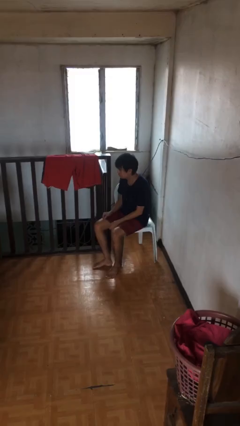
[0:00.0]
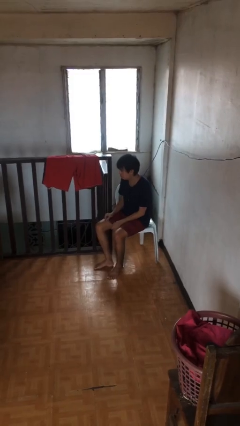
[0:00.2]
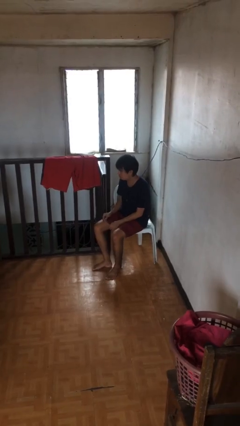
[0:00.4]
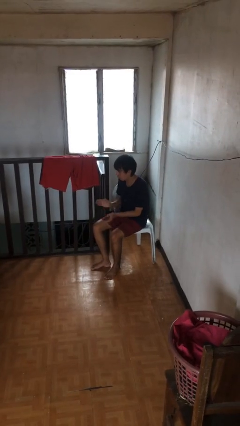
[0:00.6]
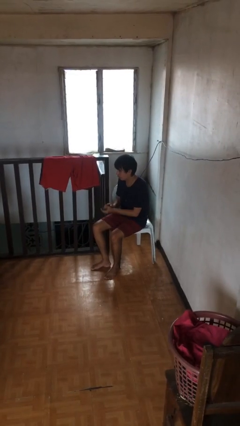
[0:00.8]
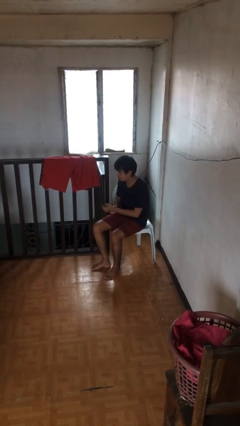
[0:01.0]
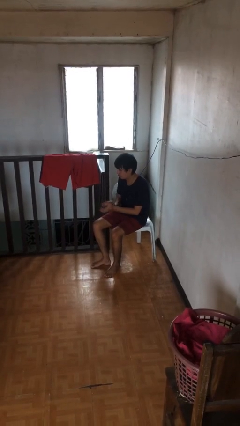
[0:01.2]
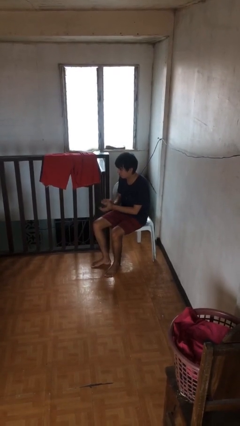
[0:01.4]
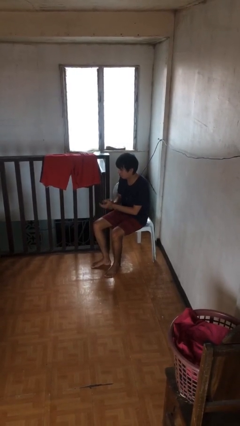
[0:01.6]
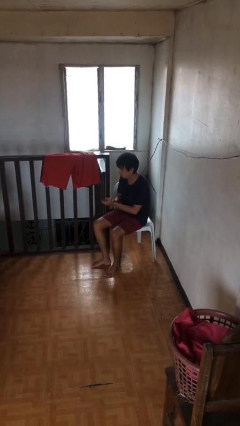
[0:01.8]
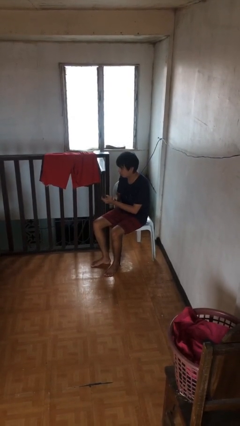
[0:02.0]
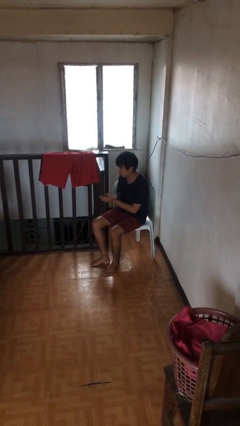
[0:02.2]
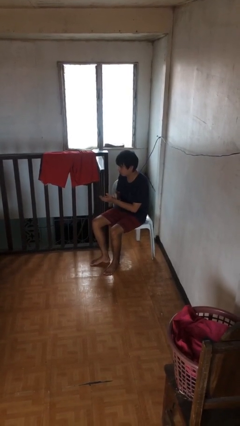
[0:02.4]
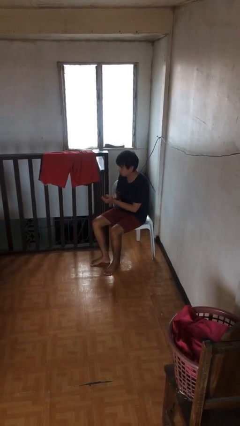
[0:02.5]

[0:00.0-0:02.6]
person claps hands

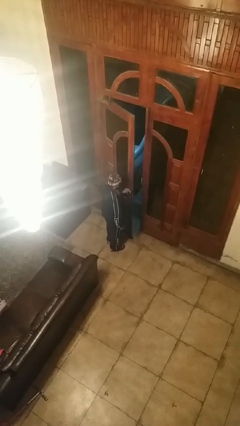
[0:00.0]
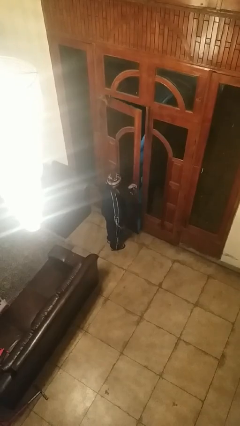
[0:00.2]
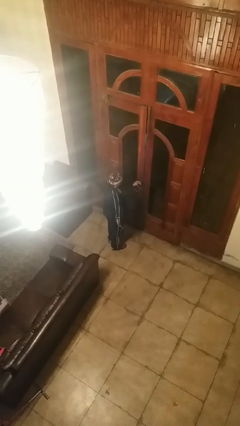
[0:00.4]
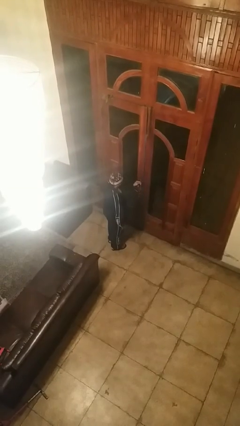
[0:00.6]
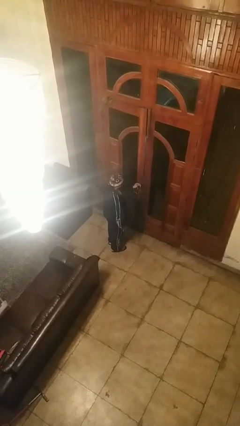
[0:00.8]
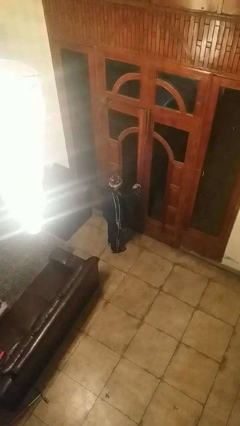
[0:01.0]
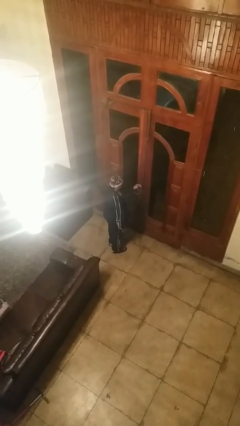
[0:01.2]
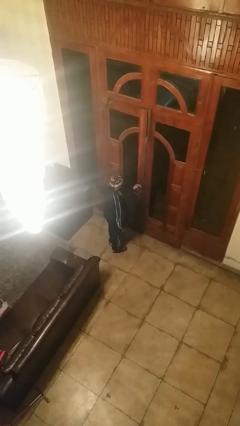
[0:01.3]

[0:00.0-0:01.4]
person closes facility door

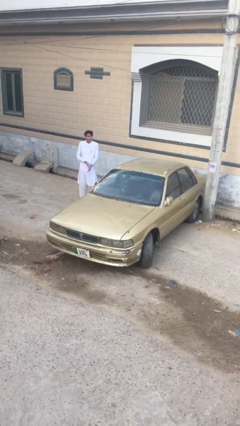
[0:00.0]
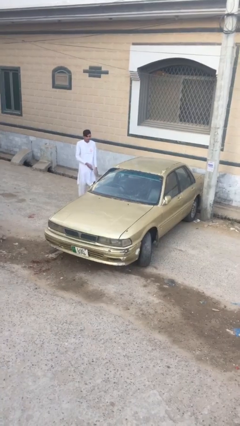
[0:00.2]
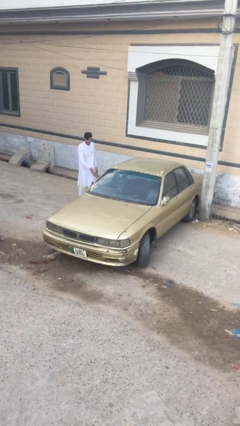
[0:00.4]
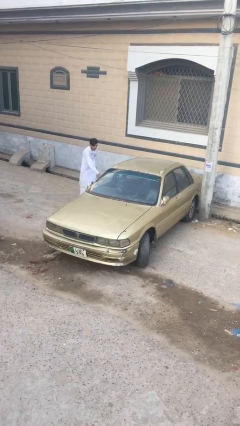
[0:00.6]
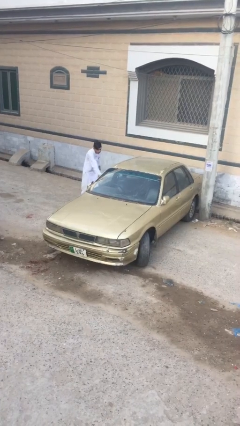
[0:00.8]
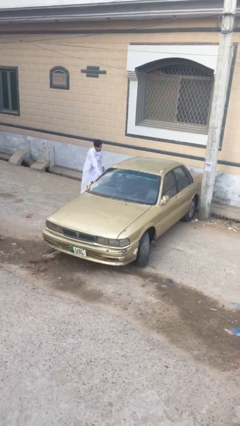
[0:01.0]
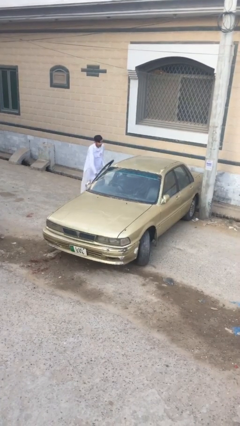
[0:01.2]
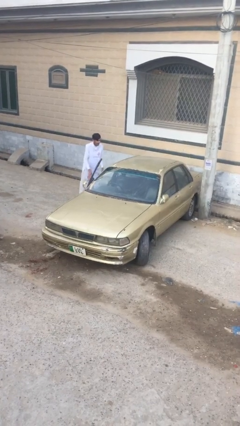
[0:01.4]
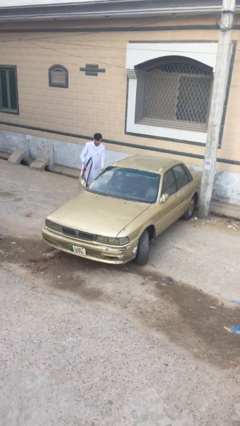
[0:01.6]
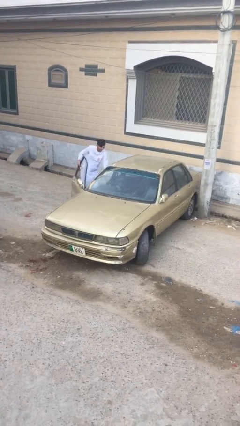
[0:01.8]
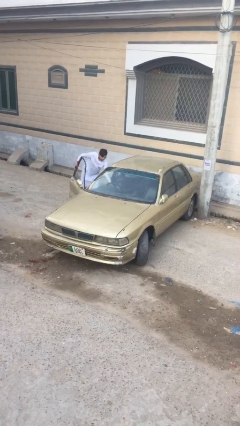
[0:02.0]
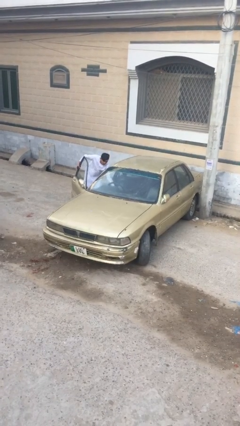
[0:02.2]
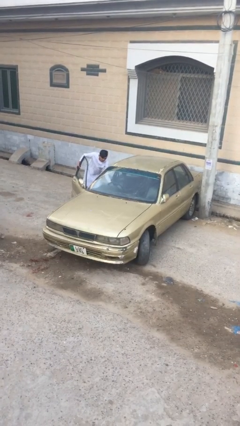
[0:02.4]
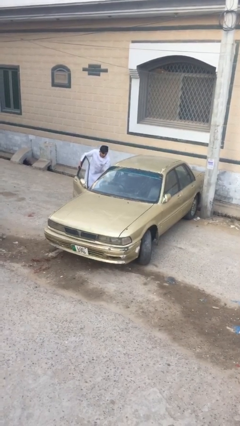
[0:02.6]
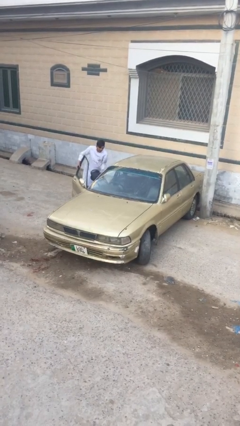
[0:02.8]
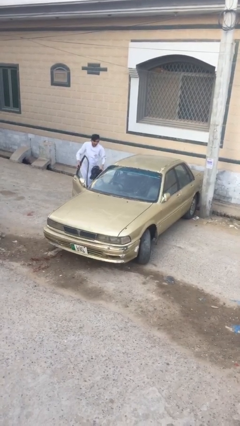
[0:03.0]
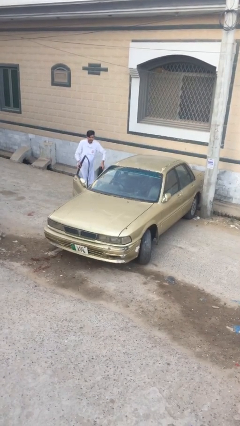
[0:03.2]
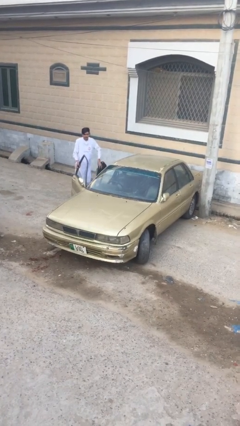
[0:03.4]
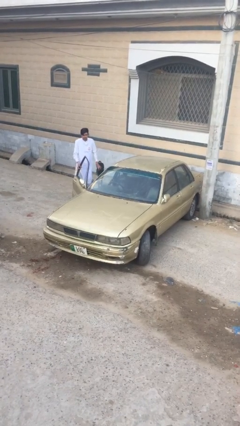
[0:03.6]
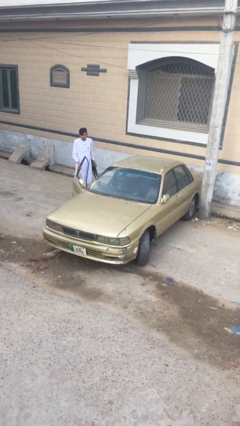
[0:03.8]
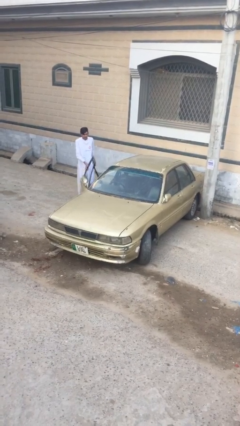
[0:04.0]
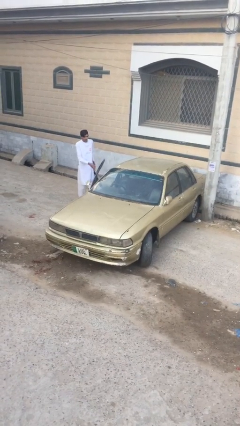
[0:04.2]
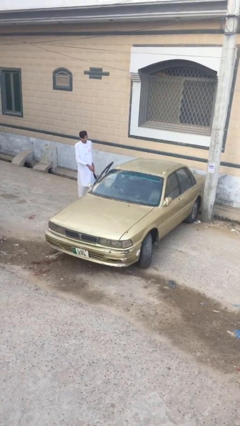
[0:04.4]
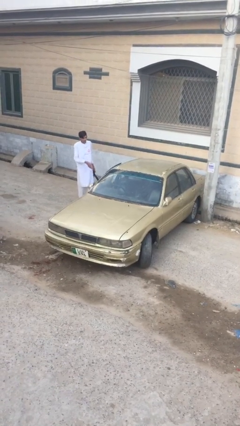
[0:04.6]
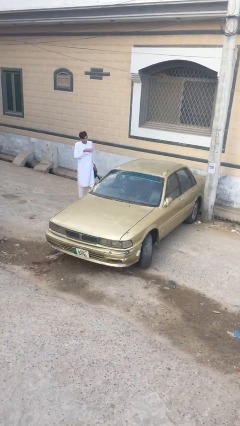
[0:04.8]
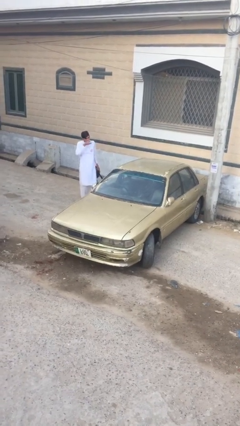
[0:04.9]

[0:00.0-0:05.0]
person unloads car

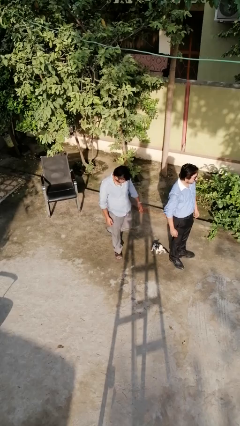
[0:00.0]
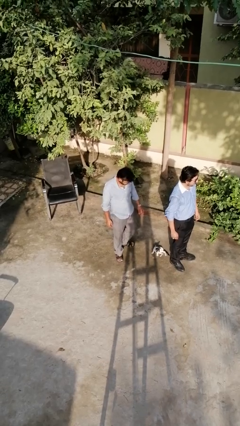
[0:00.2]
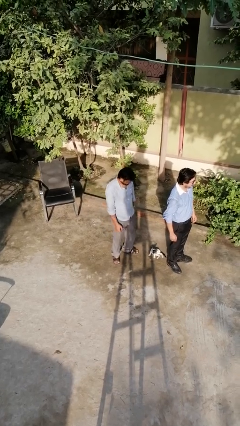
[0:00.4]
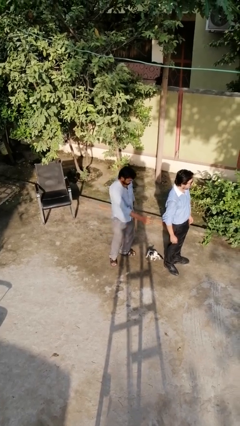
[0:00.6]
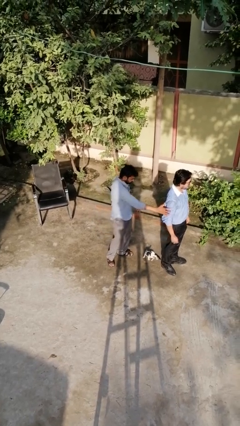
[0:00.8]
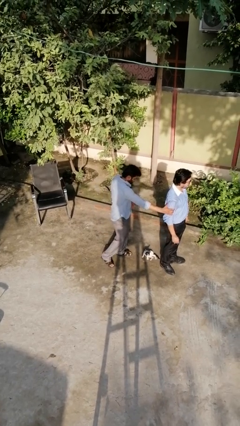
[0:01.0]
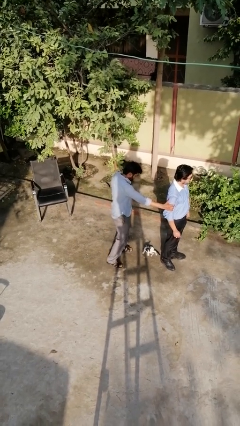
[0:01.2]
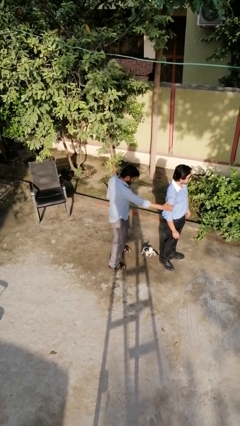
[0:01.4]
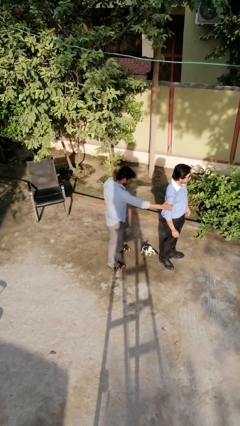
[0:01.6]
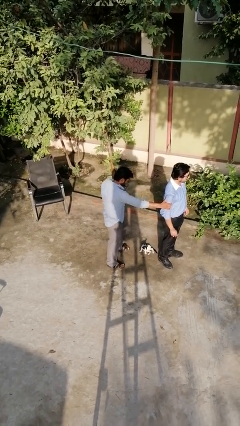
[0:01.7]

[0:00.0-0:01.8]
person grabs person by bicep

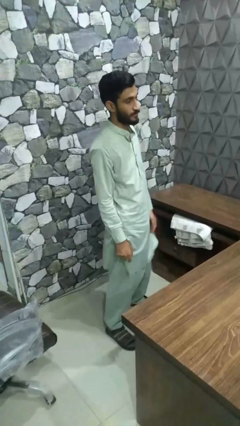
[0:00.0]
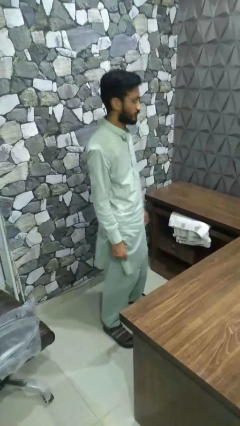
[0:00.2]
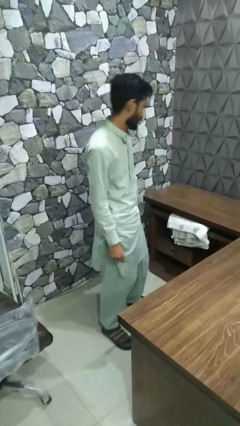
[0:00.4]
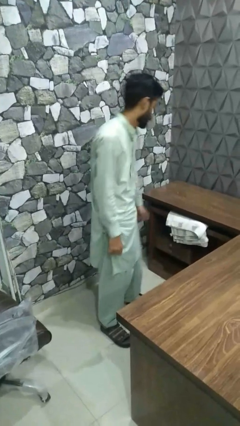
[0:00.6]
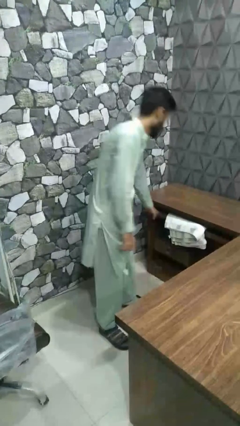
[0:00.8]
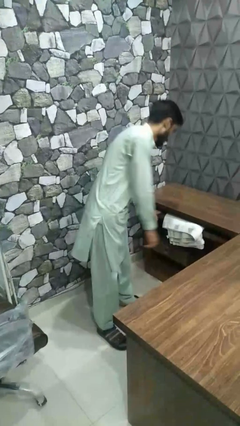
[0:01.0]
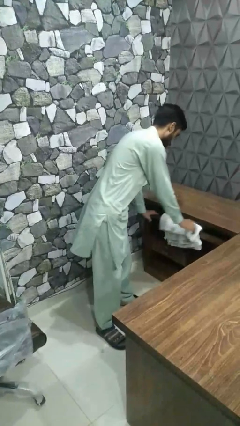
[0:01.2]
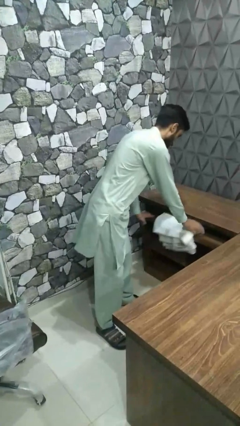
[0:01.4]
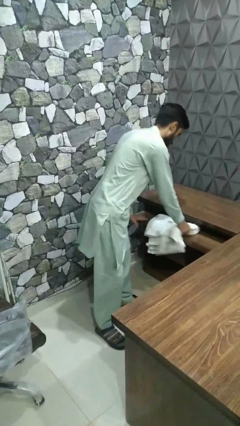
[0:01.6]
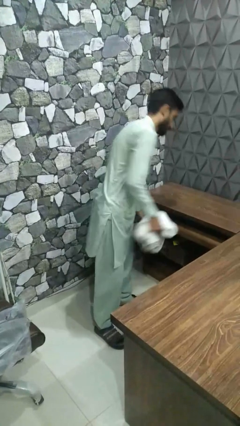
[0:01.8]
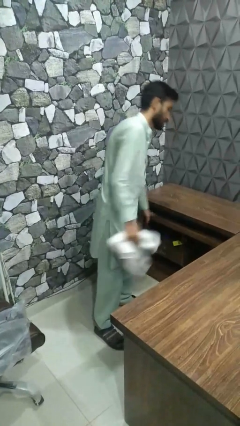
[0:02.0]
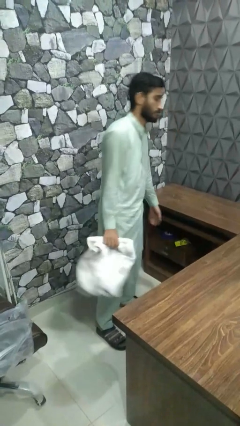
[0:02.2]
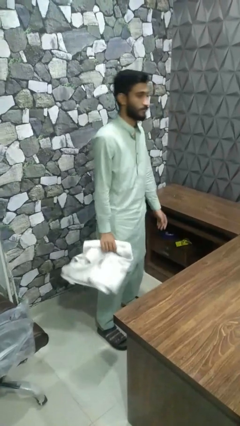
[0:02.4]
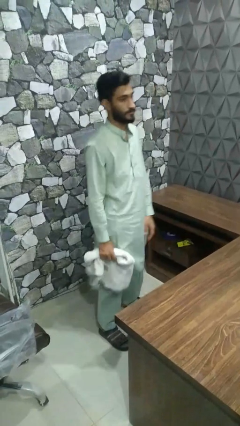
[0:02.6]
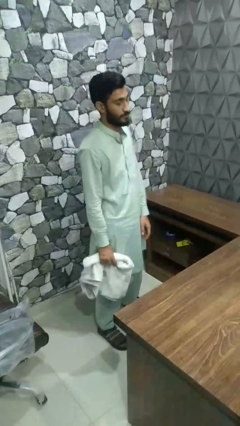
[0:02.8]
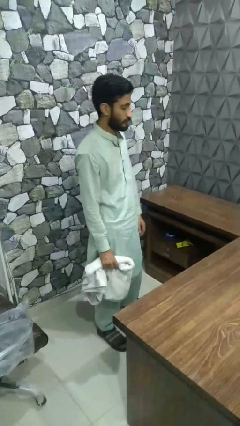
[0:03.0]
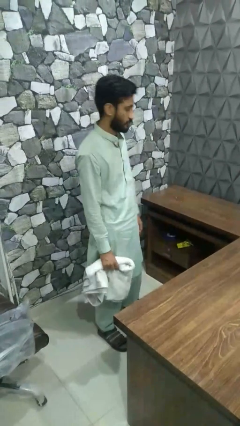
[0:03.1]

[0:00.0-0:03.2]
person takes clothes from dresser

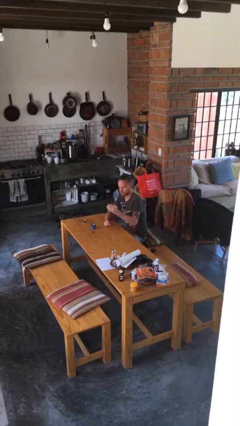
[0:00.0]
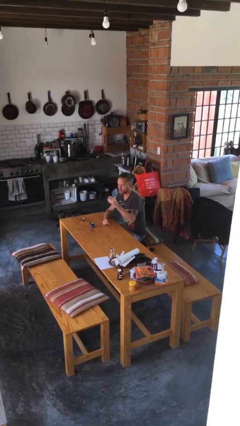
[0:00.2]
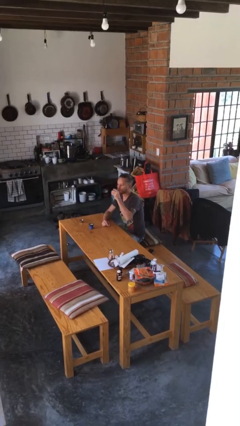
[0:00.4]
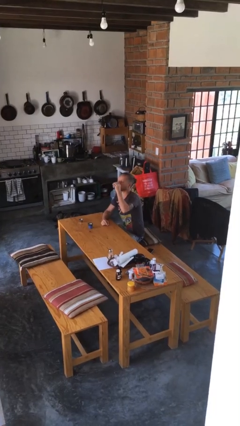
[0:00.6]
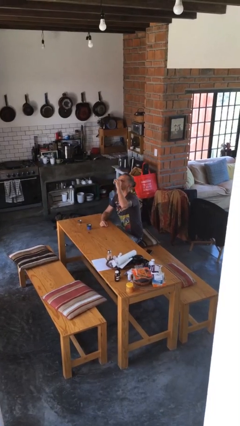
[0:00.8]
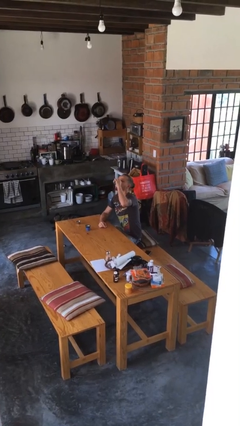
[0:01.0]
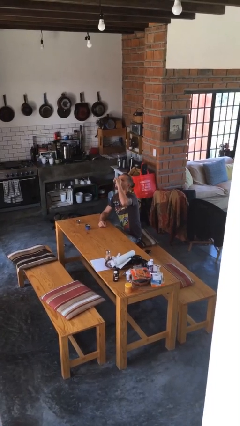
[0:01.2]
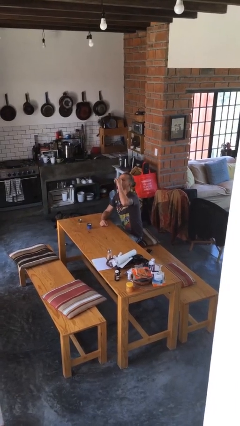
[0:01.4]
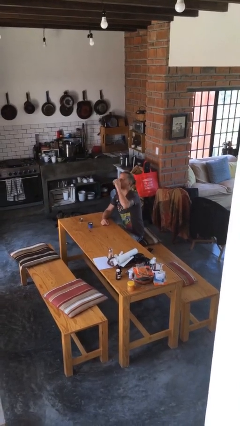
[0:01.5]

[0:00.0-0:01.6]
person drinks from shotglass

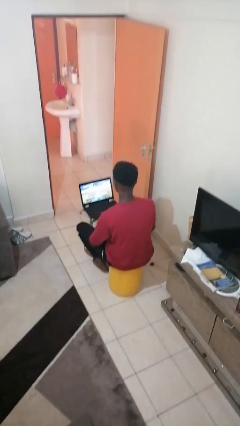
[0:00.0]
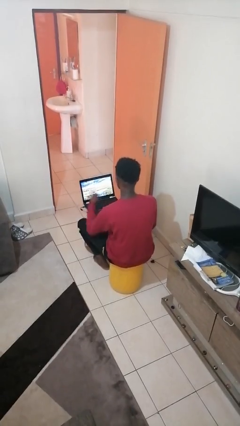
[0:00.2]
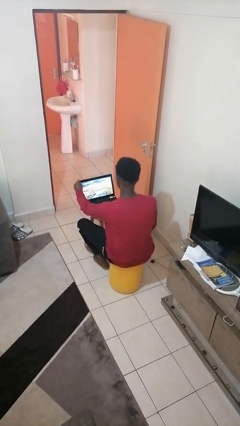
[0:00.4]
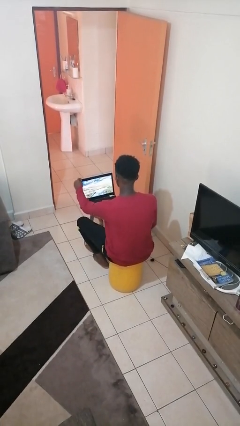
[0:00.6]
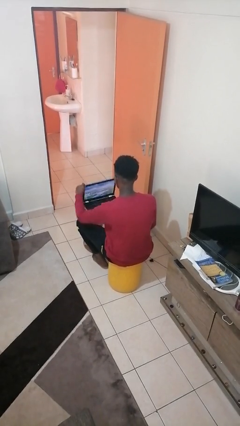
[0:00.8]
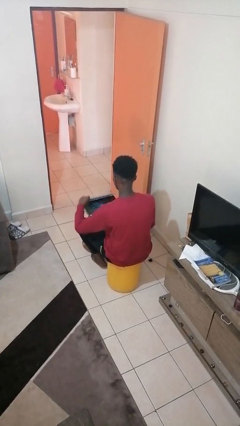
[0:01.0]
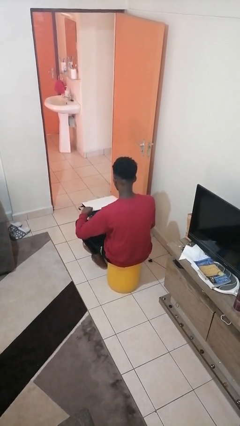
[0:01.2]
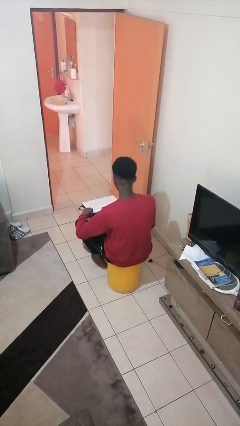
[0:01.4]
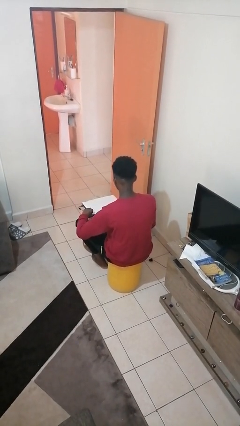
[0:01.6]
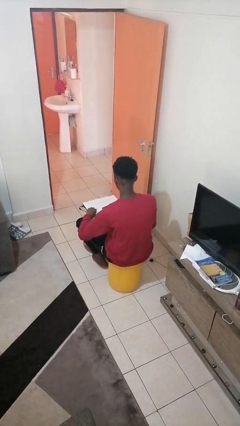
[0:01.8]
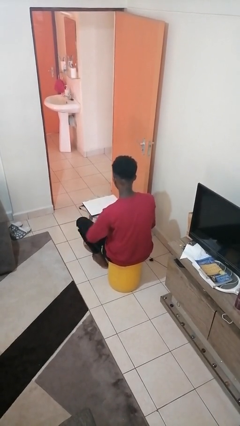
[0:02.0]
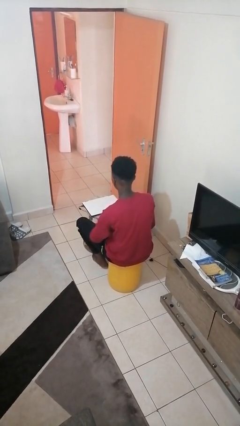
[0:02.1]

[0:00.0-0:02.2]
person closes laptop
